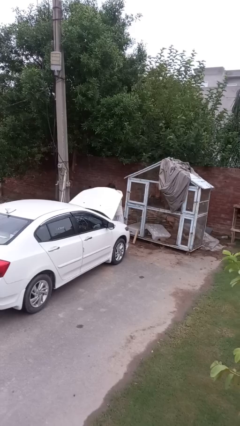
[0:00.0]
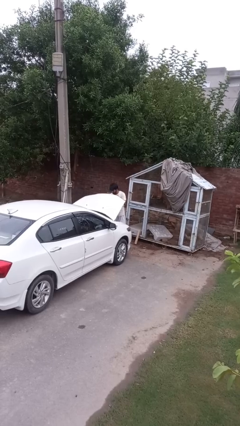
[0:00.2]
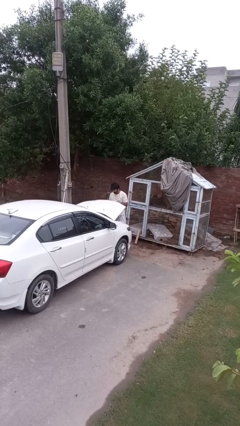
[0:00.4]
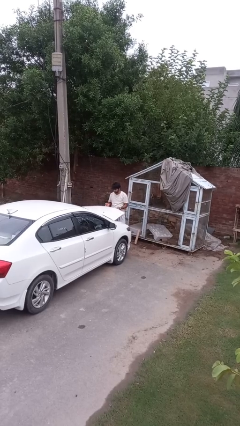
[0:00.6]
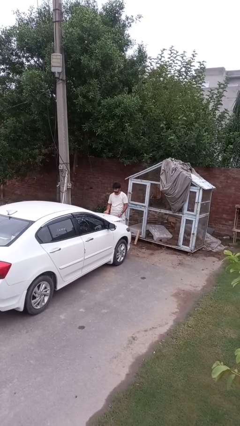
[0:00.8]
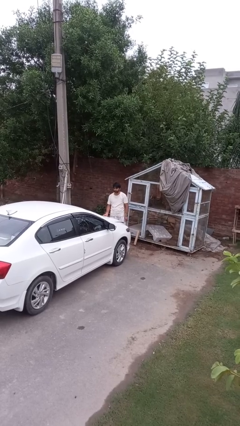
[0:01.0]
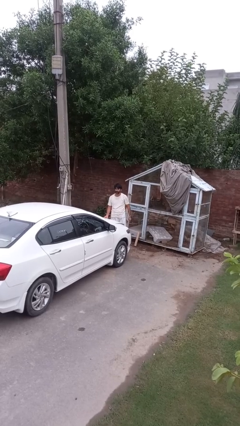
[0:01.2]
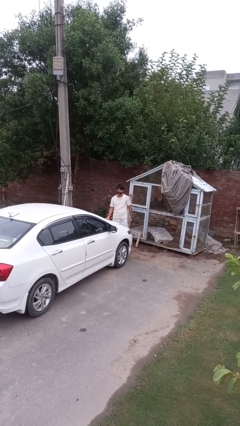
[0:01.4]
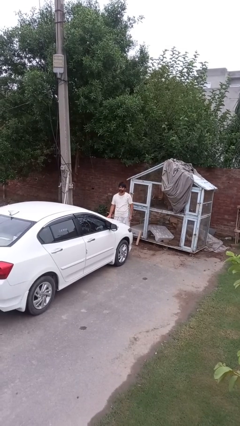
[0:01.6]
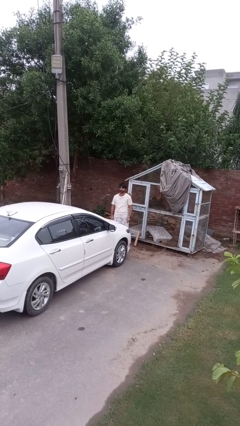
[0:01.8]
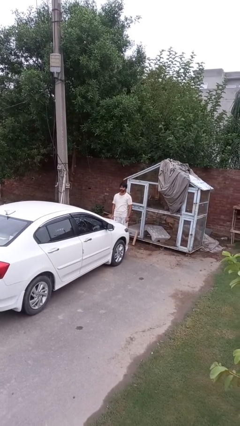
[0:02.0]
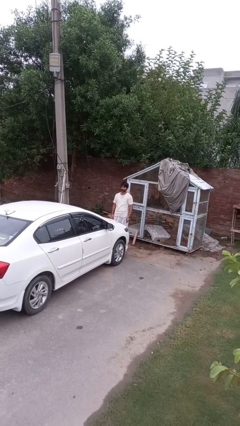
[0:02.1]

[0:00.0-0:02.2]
person closes car hood

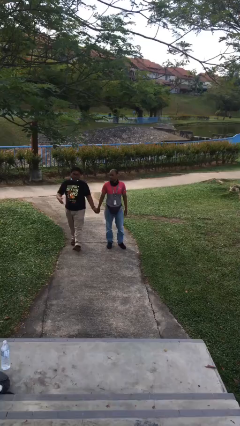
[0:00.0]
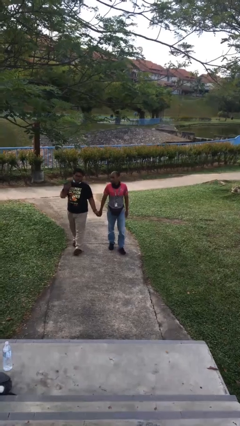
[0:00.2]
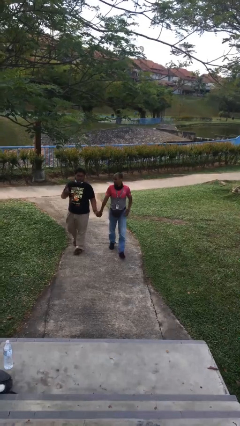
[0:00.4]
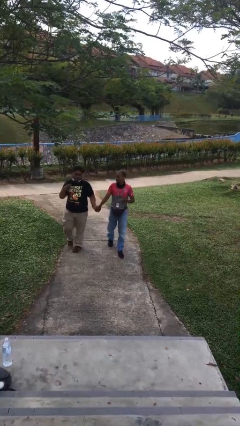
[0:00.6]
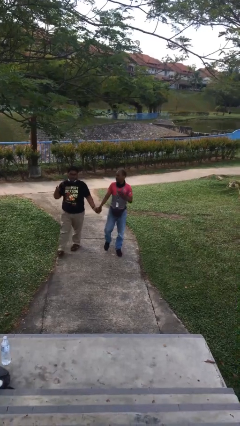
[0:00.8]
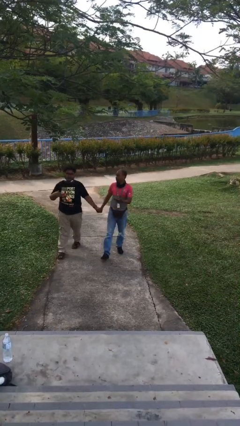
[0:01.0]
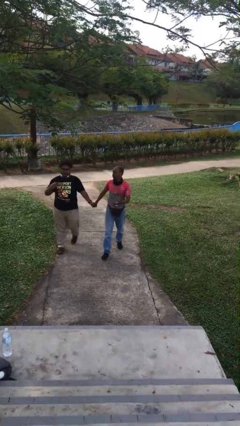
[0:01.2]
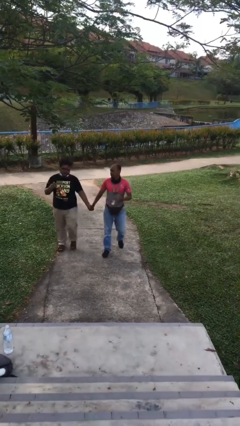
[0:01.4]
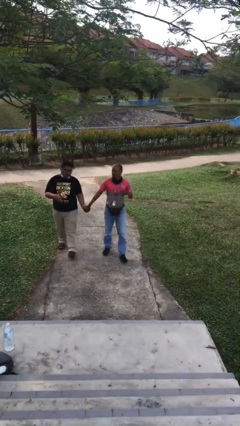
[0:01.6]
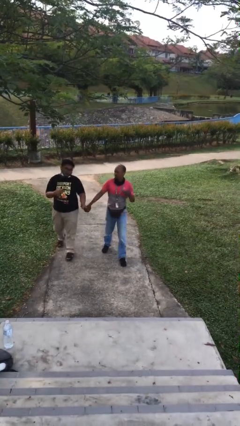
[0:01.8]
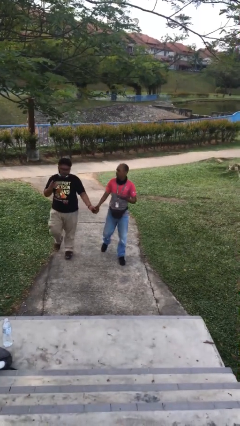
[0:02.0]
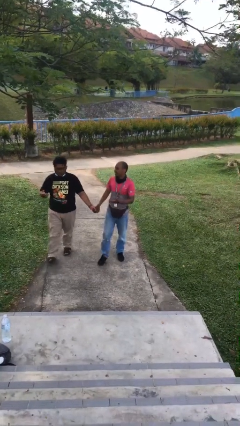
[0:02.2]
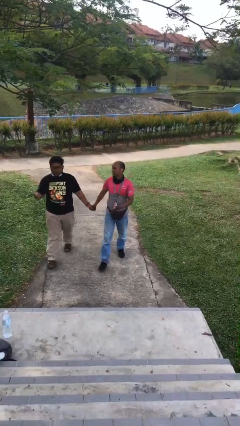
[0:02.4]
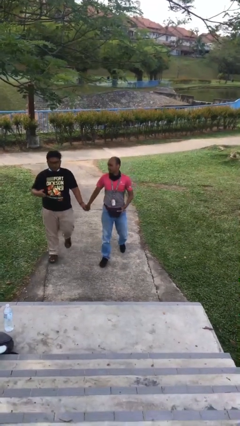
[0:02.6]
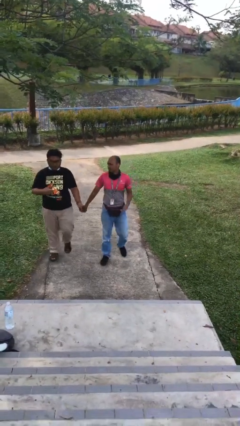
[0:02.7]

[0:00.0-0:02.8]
person holds hand

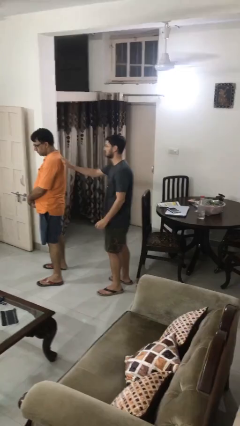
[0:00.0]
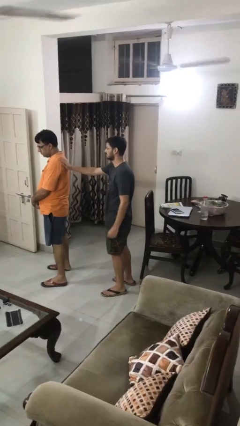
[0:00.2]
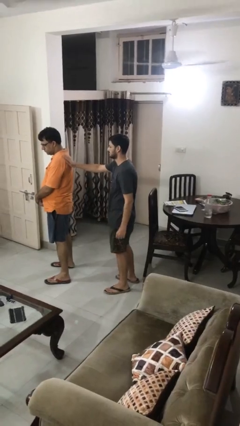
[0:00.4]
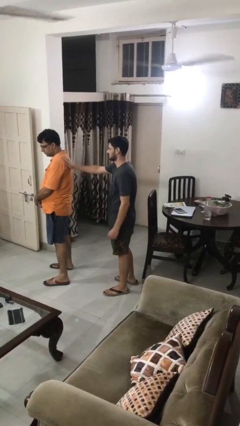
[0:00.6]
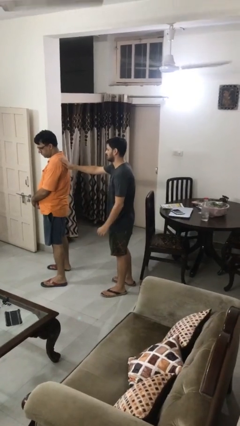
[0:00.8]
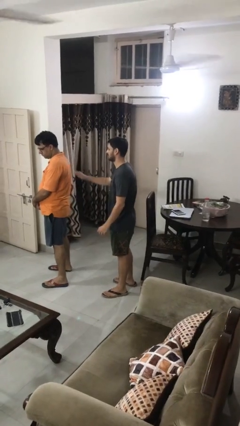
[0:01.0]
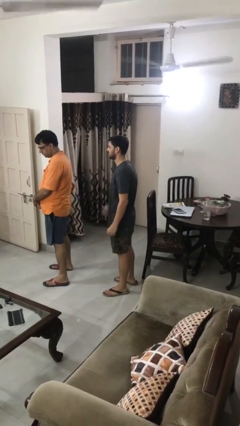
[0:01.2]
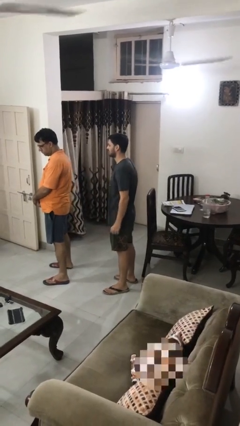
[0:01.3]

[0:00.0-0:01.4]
person touches back of person

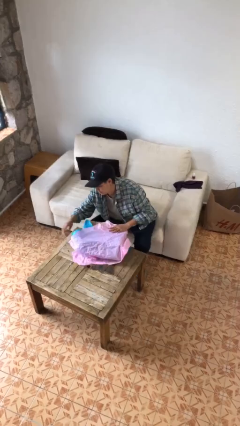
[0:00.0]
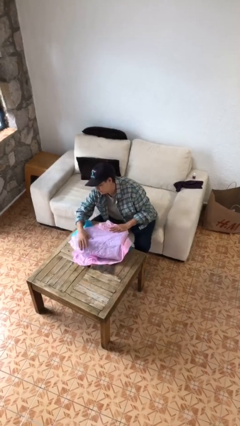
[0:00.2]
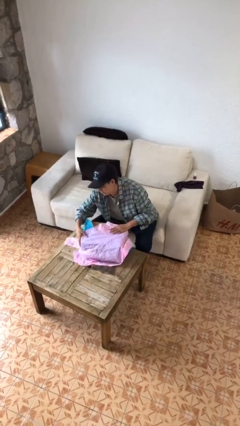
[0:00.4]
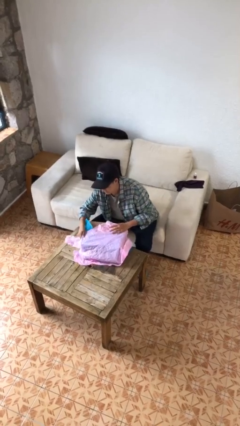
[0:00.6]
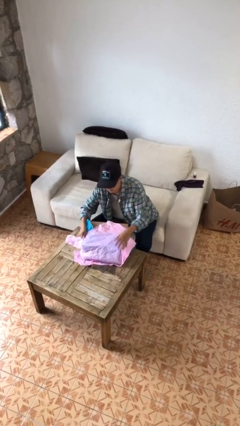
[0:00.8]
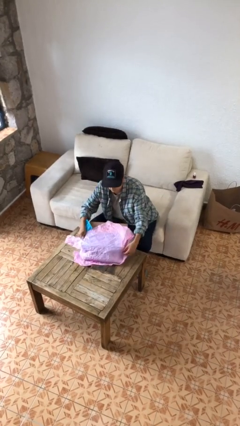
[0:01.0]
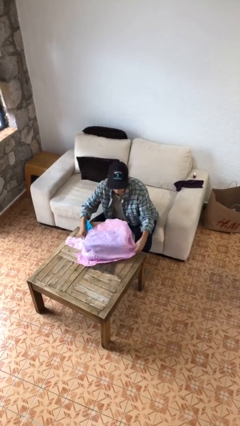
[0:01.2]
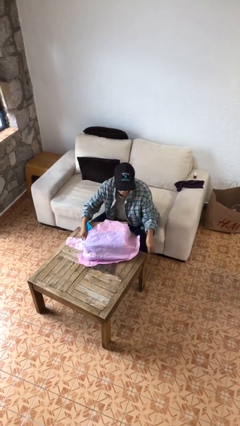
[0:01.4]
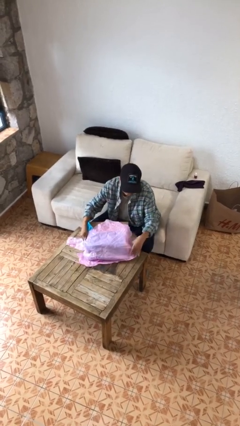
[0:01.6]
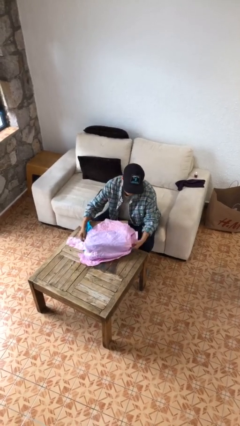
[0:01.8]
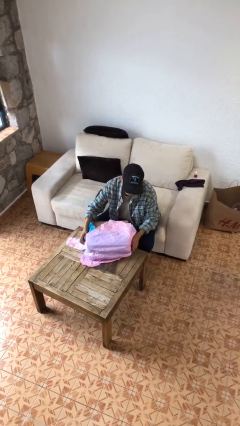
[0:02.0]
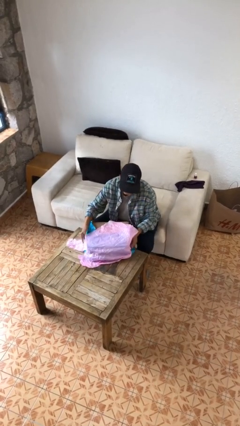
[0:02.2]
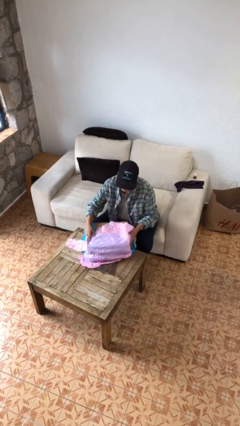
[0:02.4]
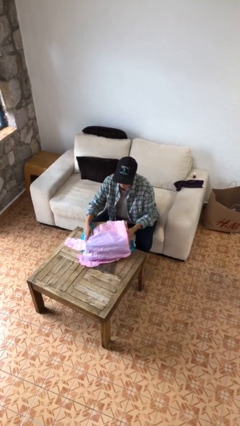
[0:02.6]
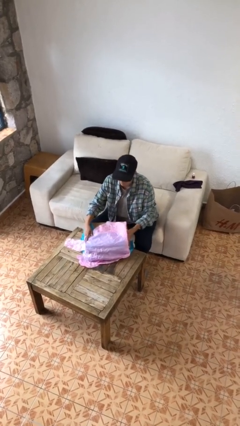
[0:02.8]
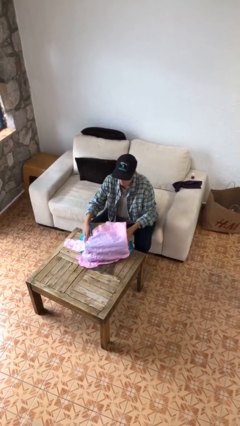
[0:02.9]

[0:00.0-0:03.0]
person wraps box

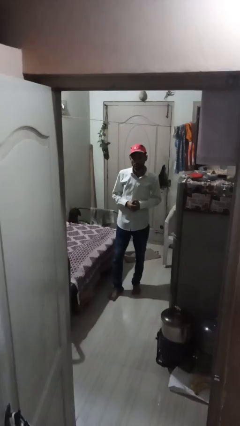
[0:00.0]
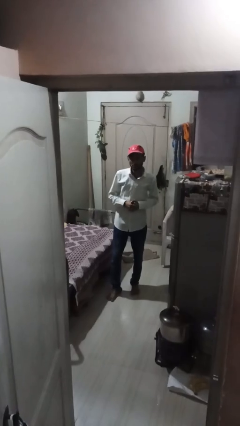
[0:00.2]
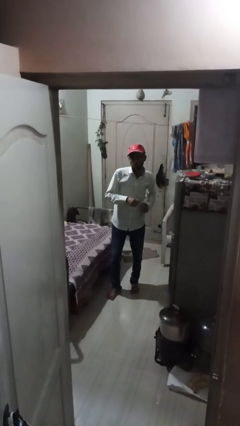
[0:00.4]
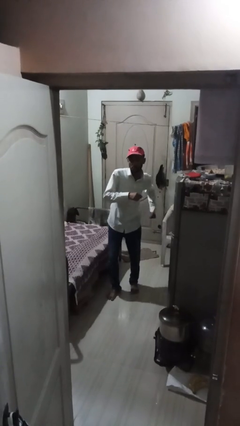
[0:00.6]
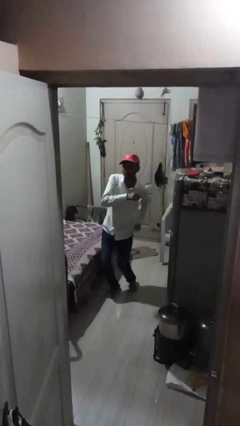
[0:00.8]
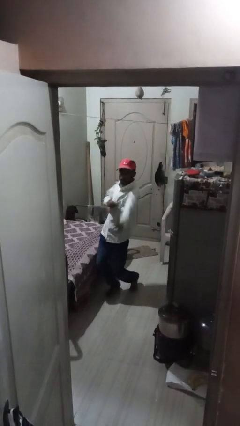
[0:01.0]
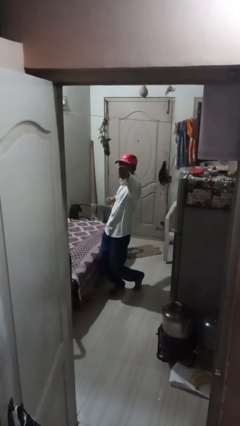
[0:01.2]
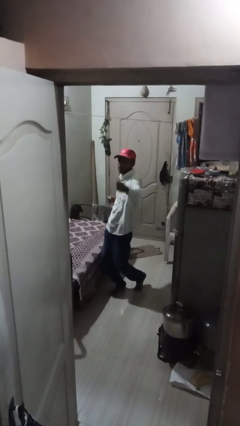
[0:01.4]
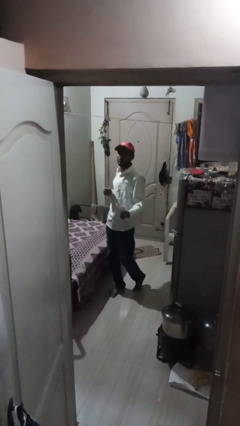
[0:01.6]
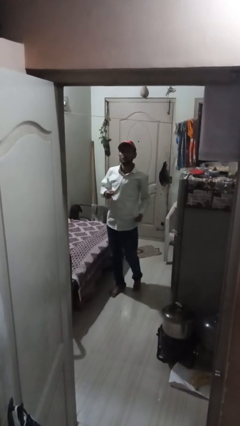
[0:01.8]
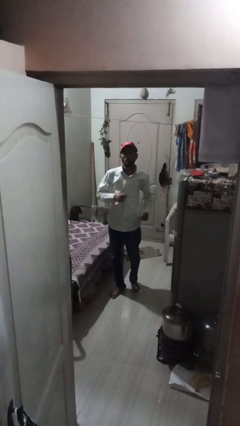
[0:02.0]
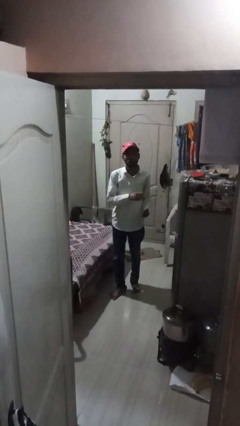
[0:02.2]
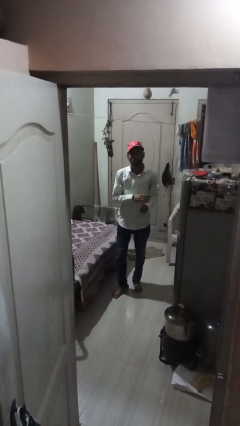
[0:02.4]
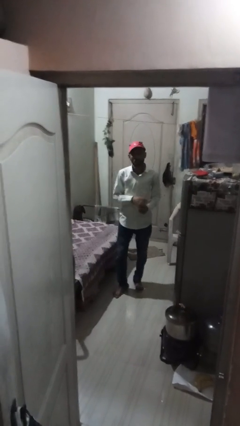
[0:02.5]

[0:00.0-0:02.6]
person punches

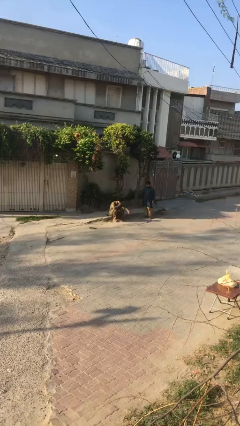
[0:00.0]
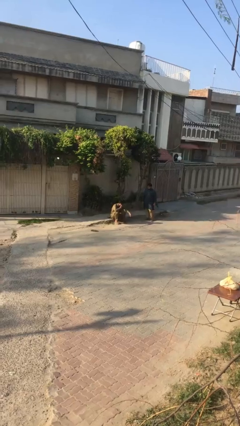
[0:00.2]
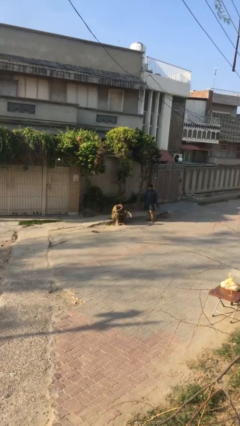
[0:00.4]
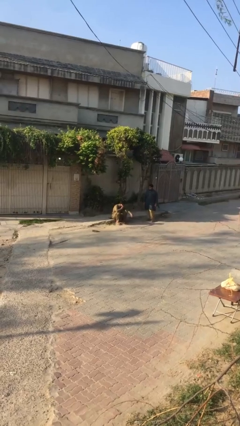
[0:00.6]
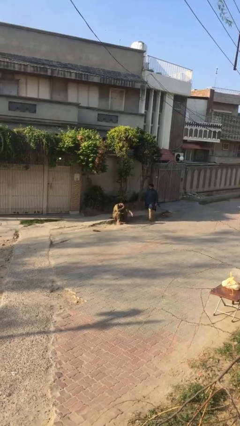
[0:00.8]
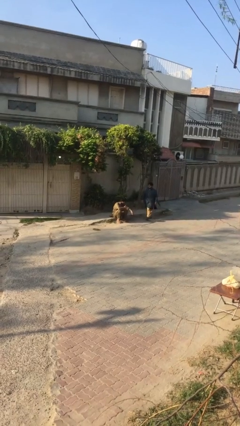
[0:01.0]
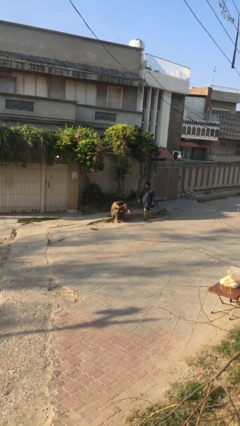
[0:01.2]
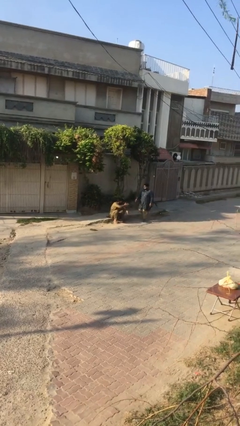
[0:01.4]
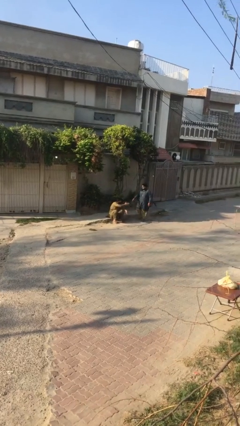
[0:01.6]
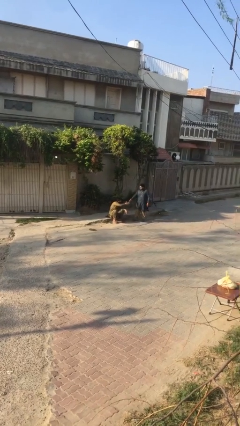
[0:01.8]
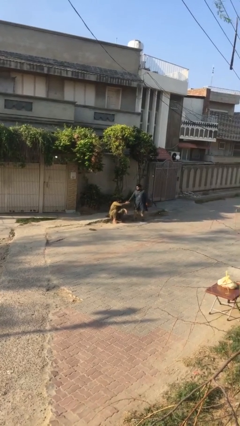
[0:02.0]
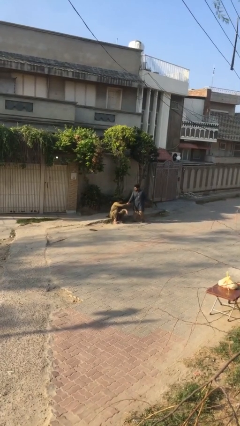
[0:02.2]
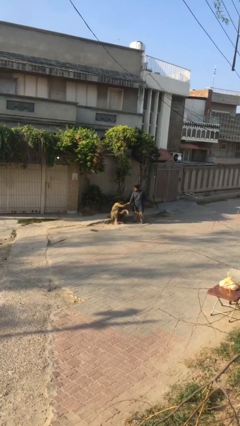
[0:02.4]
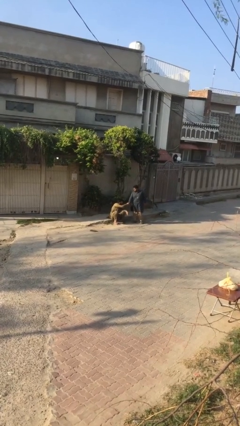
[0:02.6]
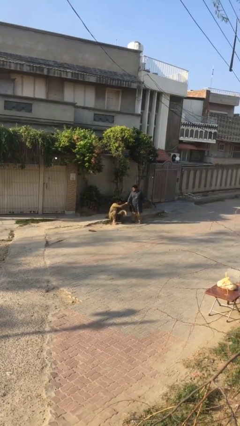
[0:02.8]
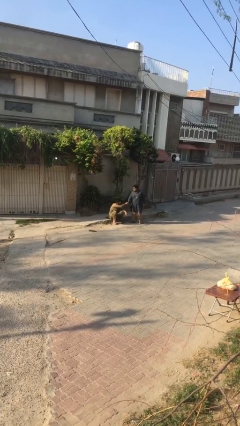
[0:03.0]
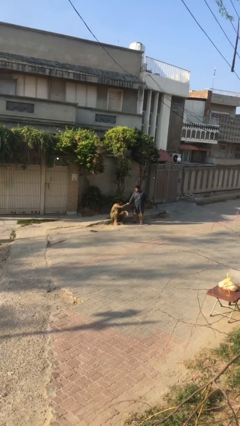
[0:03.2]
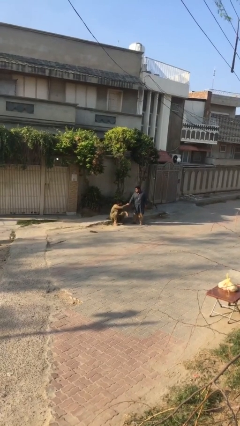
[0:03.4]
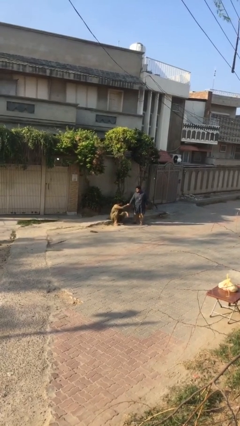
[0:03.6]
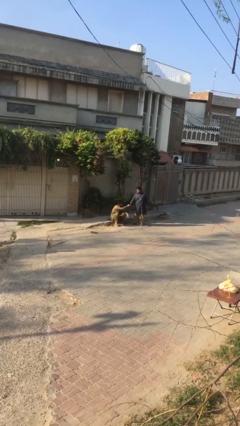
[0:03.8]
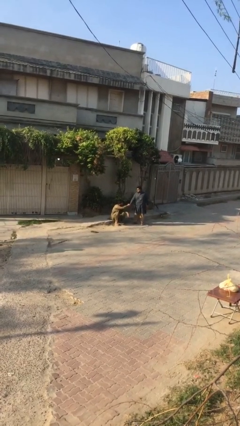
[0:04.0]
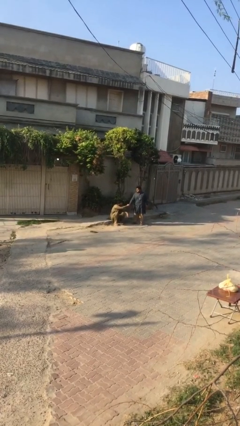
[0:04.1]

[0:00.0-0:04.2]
person shakes hand

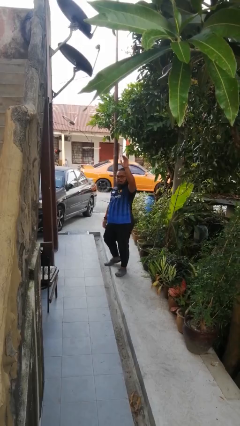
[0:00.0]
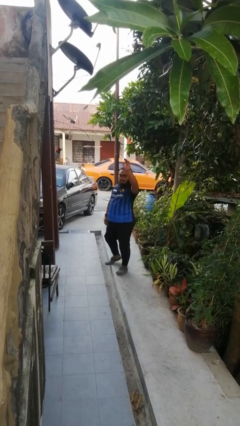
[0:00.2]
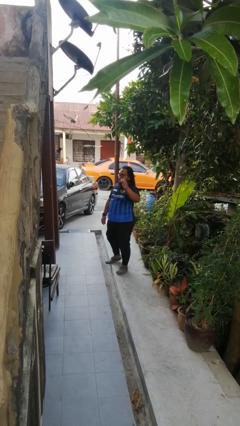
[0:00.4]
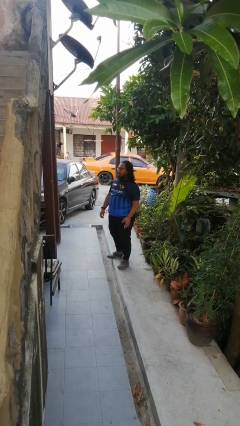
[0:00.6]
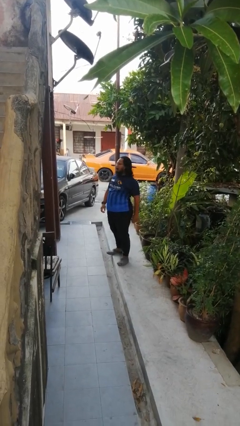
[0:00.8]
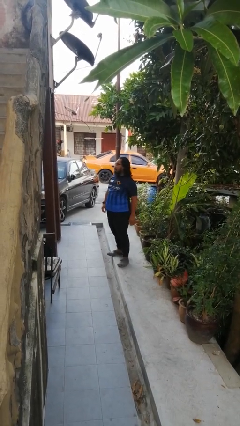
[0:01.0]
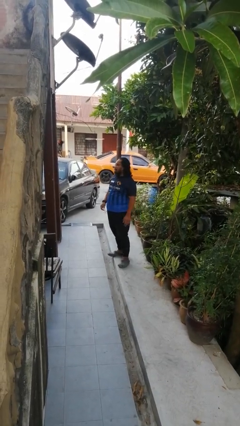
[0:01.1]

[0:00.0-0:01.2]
person gestures lower hand
